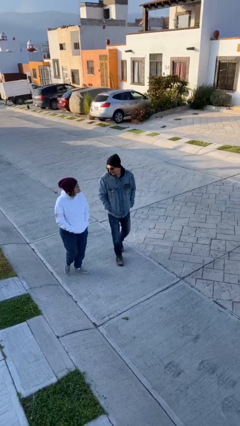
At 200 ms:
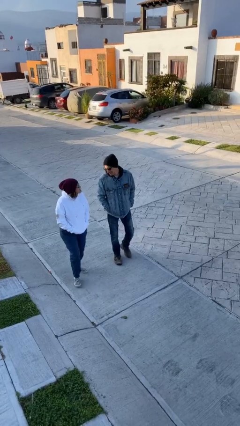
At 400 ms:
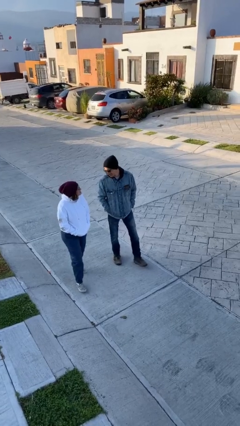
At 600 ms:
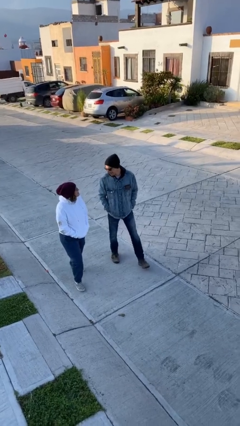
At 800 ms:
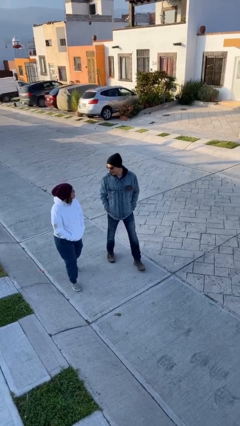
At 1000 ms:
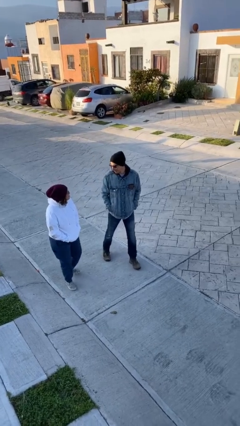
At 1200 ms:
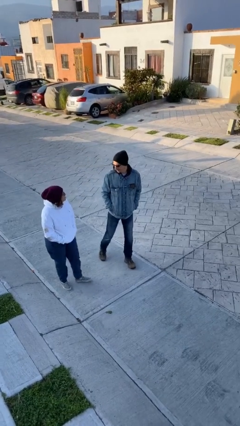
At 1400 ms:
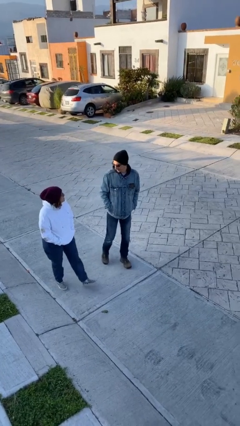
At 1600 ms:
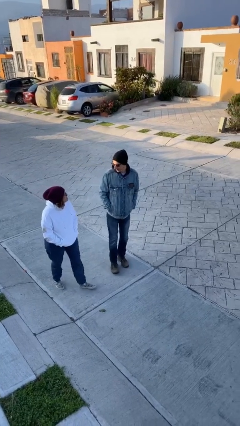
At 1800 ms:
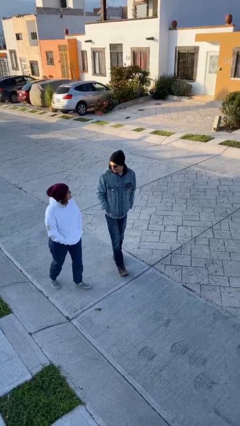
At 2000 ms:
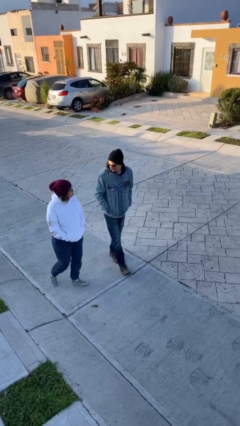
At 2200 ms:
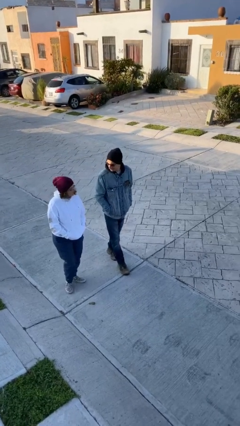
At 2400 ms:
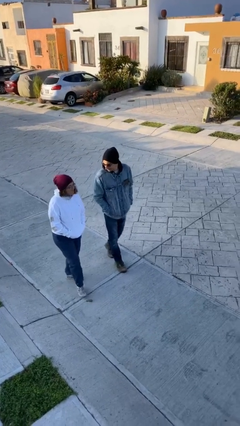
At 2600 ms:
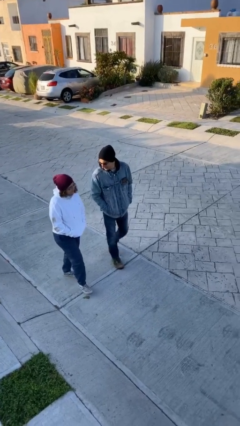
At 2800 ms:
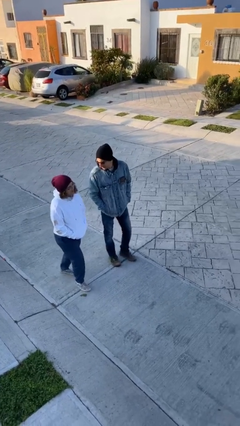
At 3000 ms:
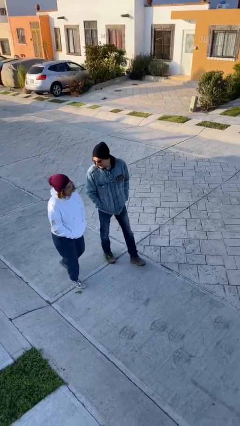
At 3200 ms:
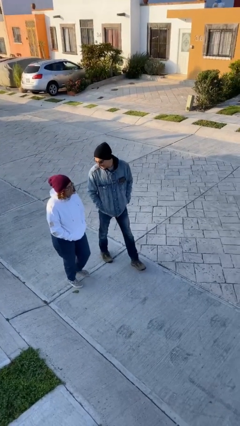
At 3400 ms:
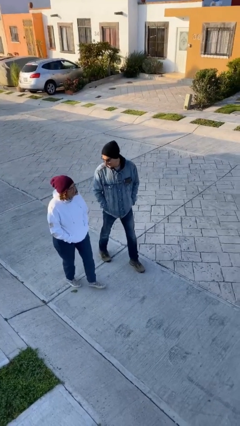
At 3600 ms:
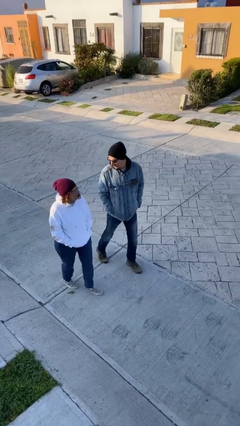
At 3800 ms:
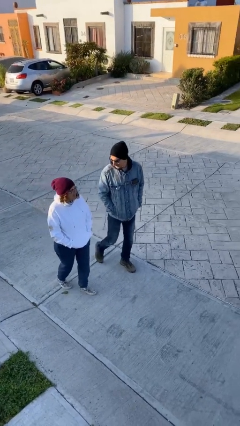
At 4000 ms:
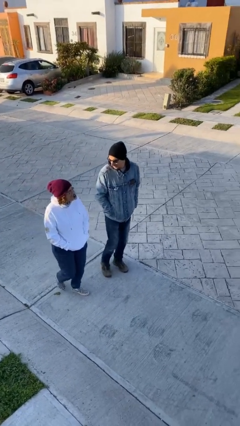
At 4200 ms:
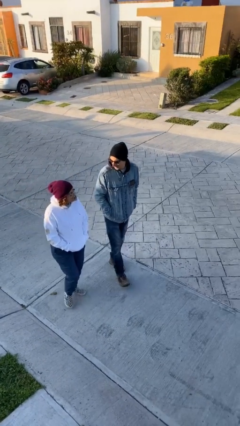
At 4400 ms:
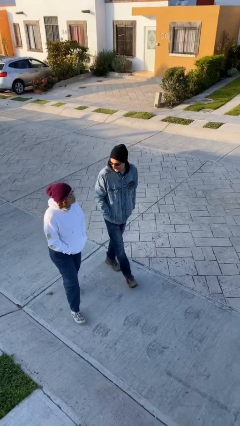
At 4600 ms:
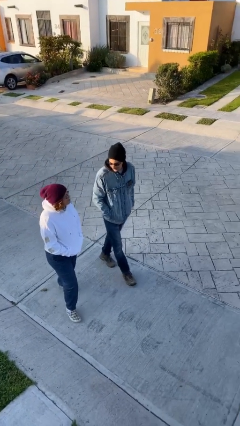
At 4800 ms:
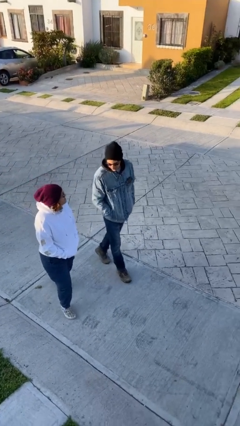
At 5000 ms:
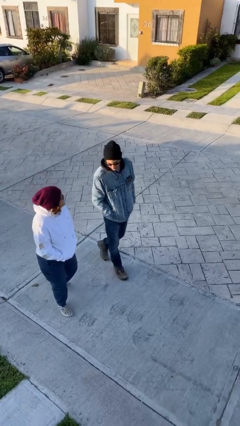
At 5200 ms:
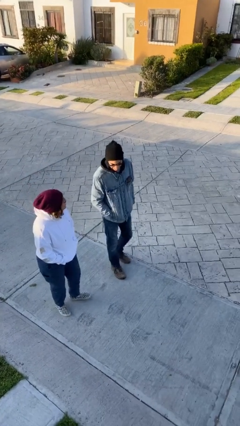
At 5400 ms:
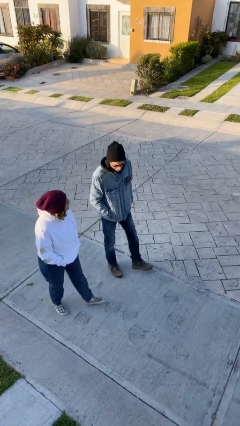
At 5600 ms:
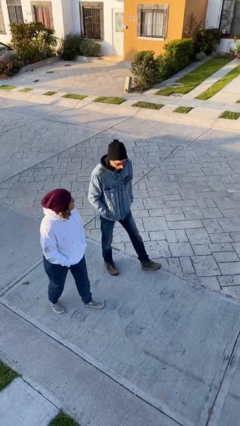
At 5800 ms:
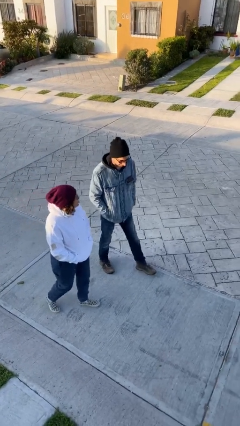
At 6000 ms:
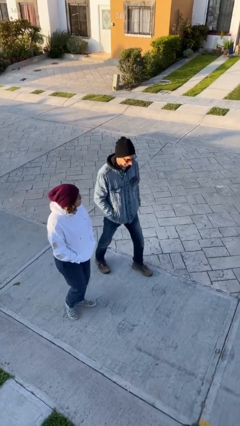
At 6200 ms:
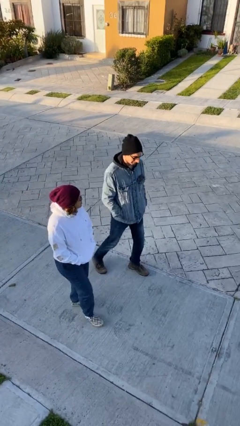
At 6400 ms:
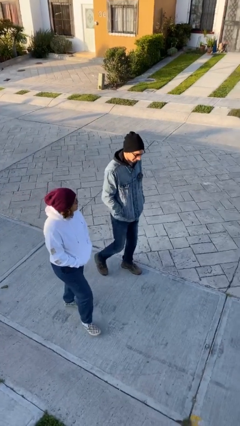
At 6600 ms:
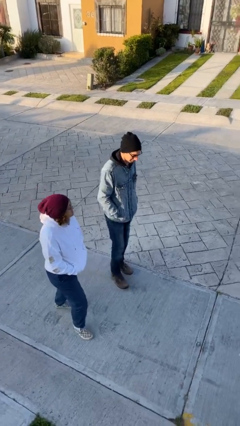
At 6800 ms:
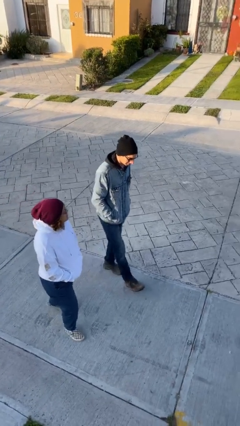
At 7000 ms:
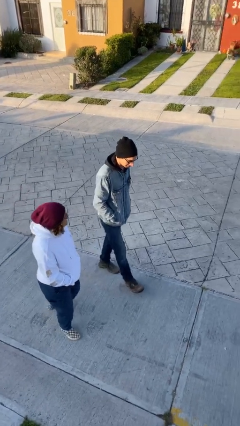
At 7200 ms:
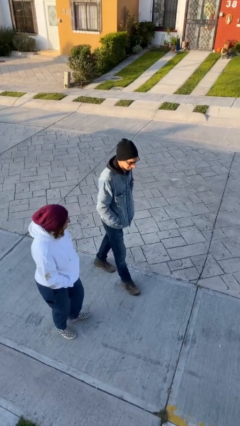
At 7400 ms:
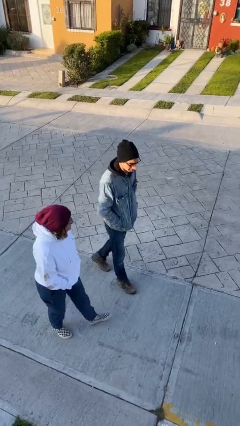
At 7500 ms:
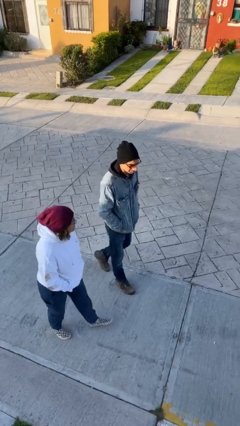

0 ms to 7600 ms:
person talks to person

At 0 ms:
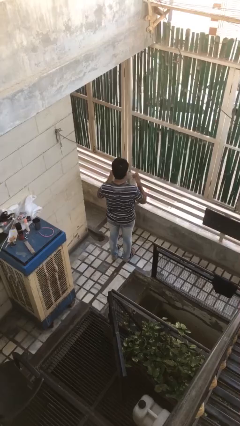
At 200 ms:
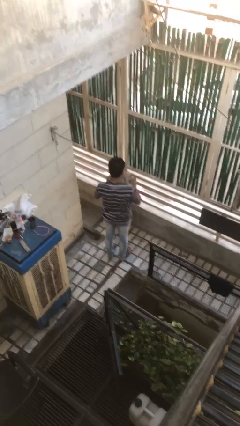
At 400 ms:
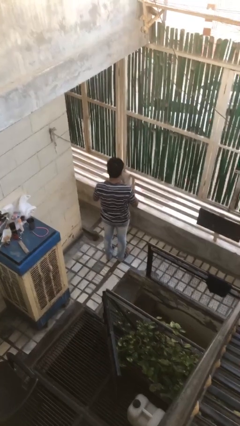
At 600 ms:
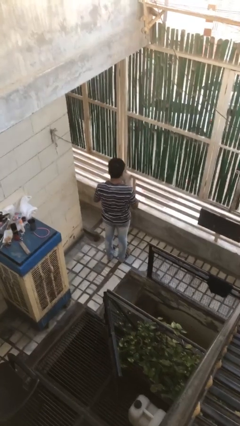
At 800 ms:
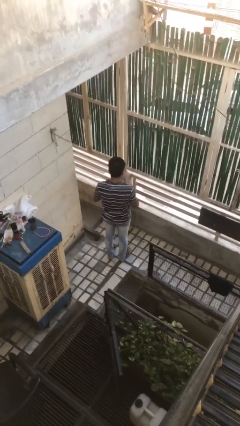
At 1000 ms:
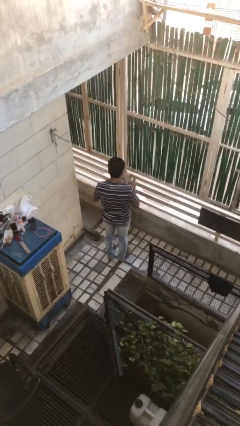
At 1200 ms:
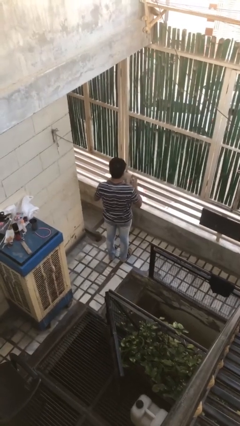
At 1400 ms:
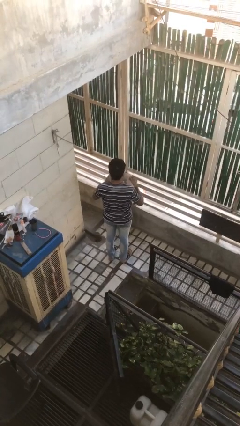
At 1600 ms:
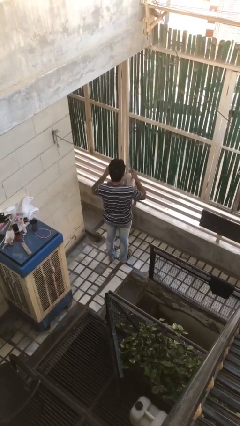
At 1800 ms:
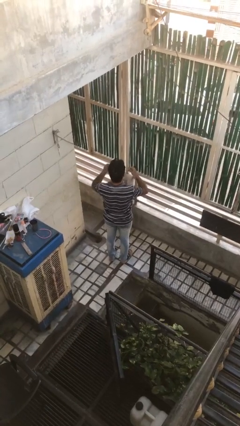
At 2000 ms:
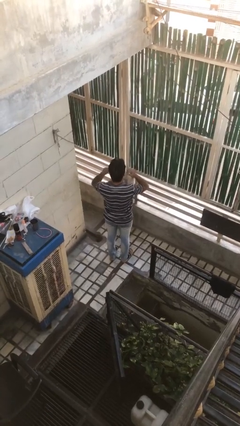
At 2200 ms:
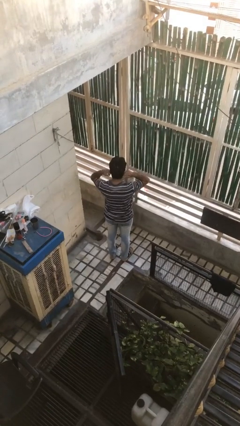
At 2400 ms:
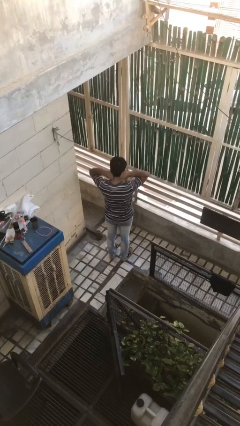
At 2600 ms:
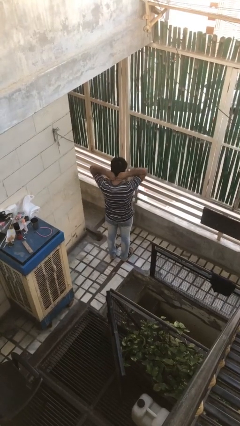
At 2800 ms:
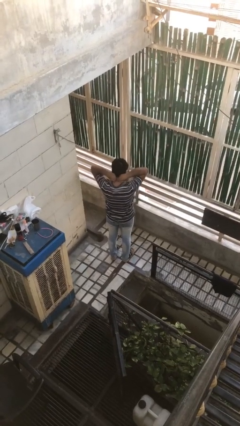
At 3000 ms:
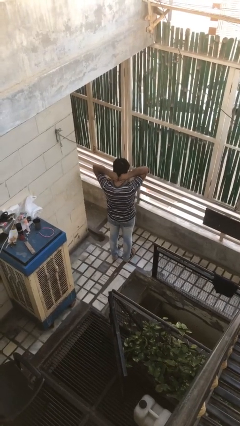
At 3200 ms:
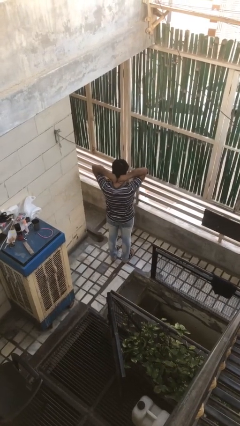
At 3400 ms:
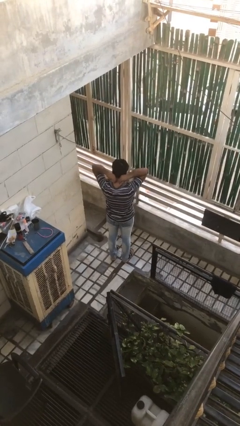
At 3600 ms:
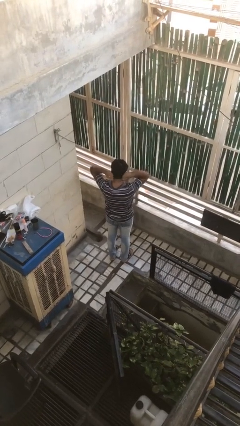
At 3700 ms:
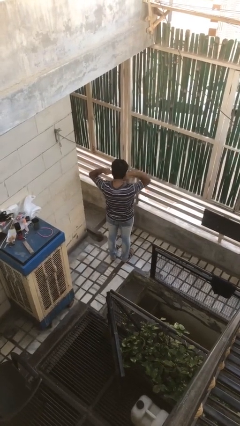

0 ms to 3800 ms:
person puts on necklace

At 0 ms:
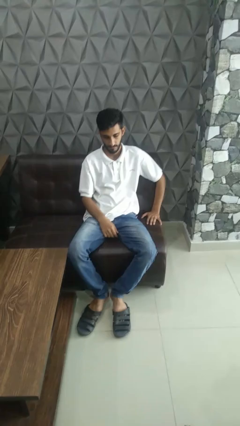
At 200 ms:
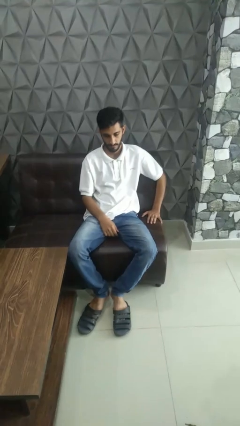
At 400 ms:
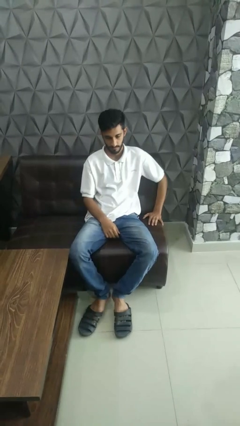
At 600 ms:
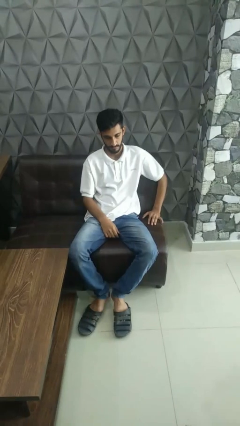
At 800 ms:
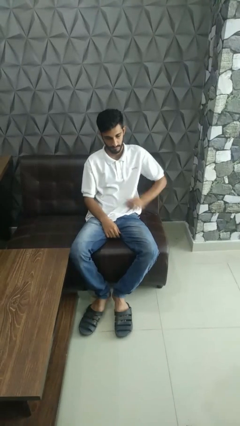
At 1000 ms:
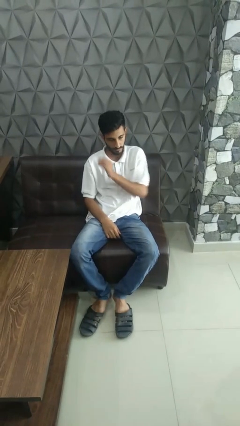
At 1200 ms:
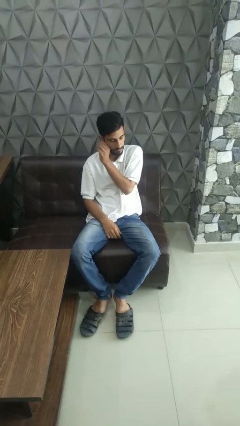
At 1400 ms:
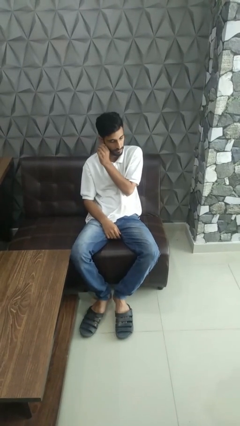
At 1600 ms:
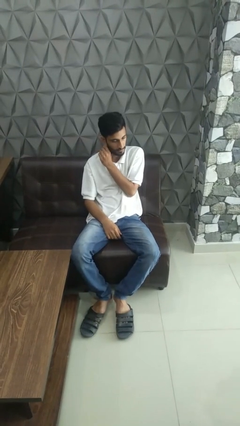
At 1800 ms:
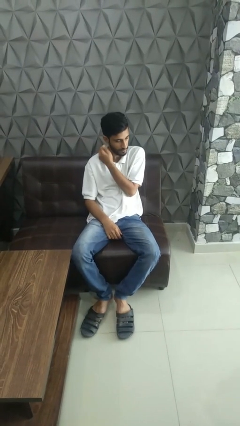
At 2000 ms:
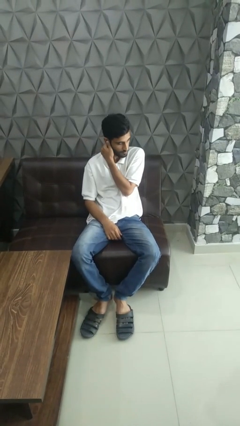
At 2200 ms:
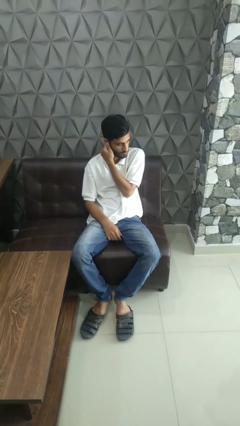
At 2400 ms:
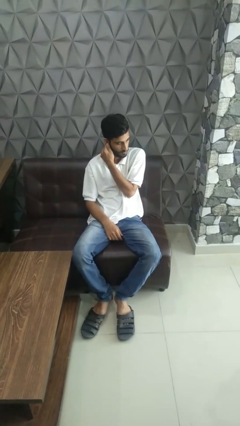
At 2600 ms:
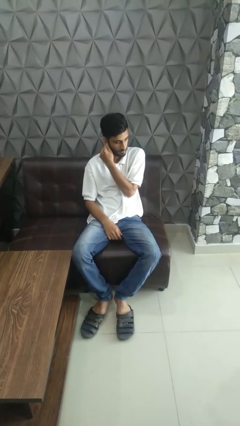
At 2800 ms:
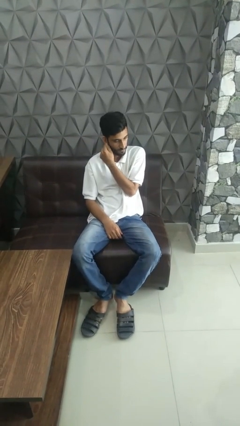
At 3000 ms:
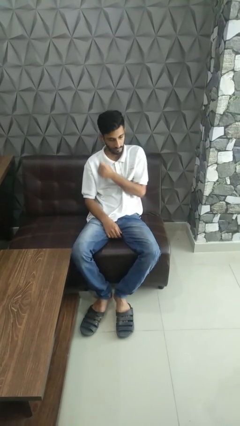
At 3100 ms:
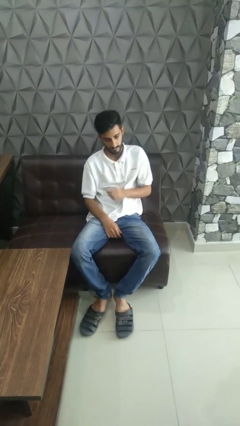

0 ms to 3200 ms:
person touches earlobe

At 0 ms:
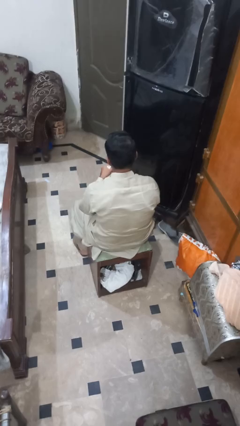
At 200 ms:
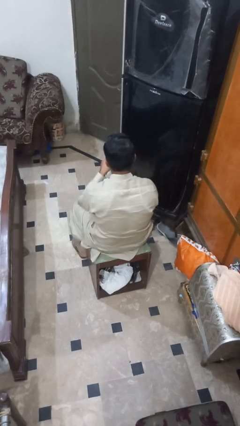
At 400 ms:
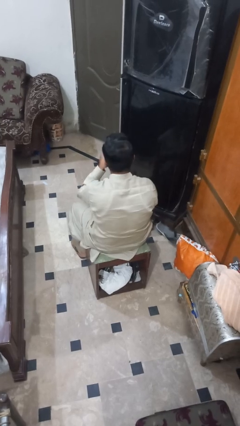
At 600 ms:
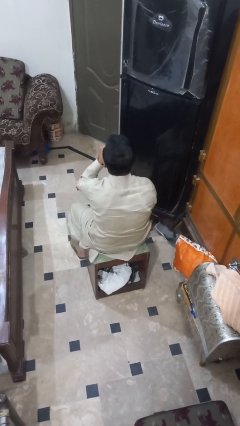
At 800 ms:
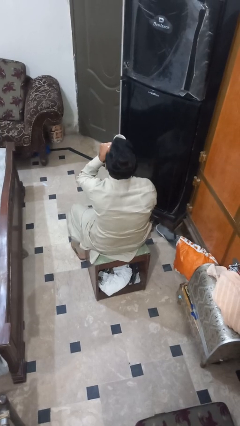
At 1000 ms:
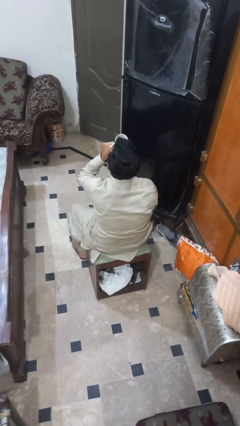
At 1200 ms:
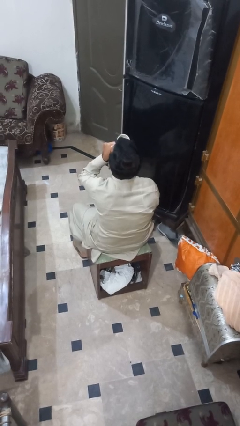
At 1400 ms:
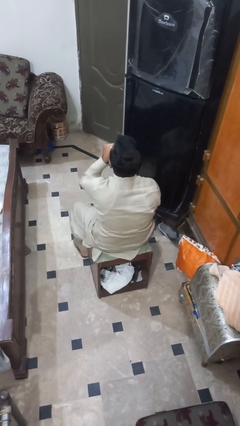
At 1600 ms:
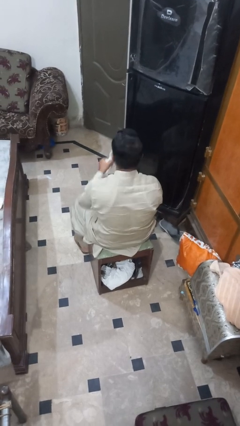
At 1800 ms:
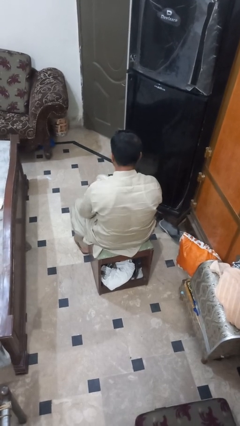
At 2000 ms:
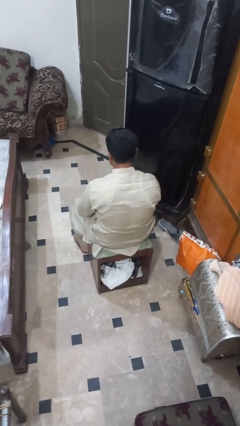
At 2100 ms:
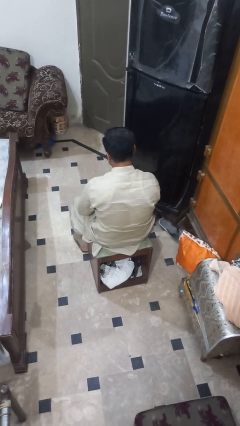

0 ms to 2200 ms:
person drinks from mug

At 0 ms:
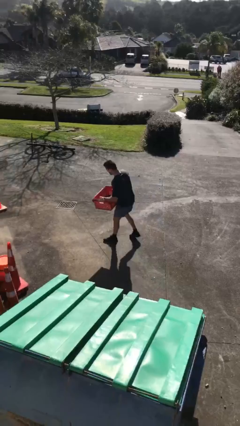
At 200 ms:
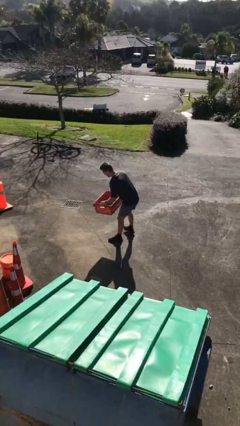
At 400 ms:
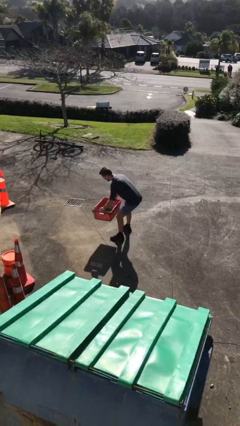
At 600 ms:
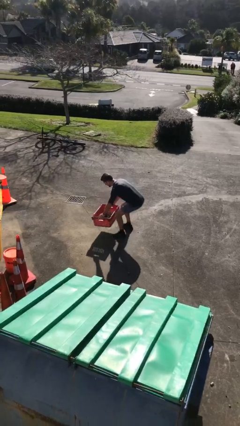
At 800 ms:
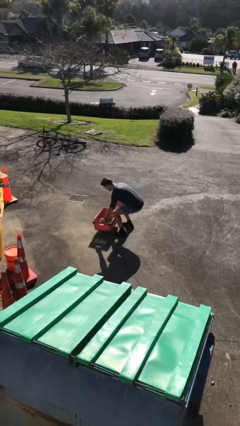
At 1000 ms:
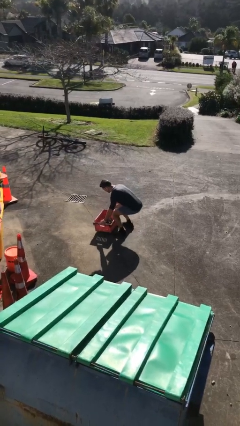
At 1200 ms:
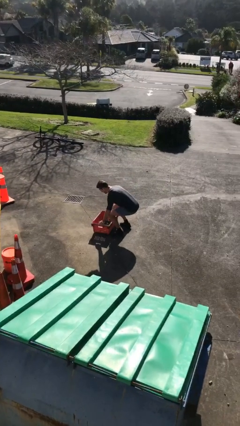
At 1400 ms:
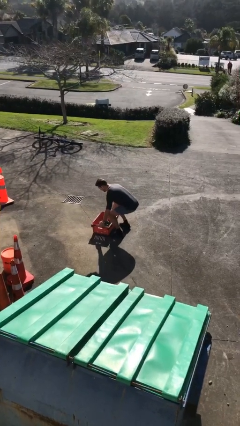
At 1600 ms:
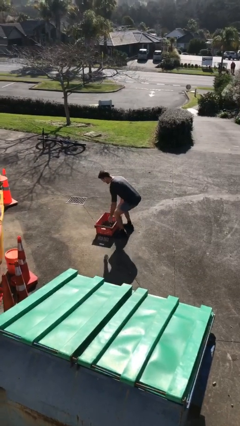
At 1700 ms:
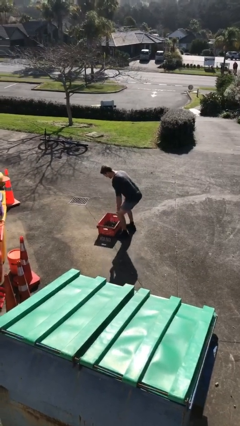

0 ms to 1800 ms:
person puts down object on floor